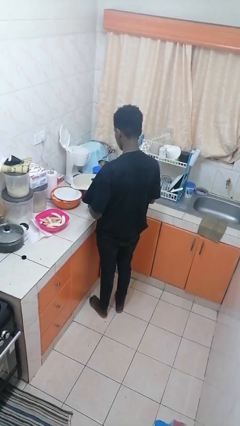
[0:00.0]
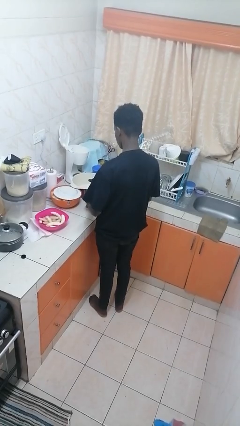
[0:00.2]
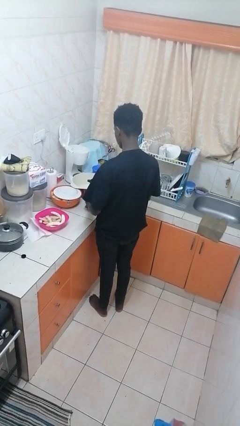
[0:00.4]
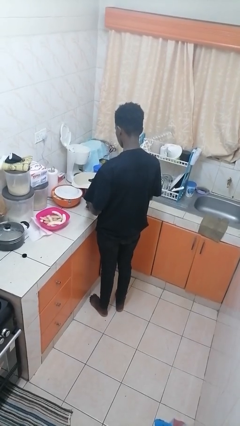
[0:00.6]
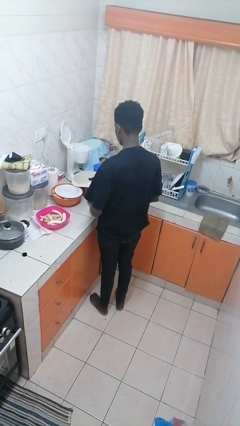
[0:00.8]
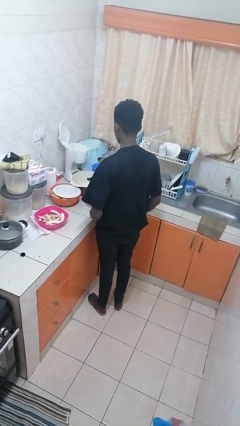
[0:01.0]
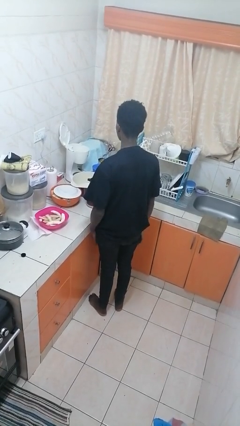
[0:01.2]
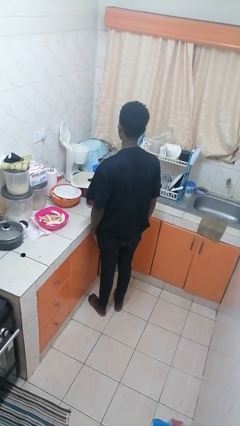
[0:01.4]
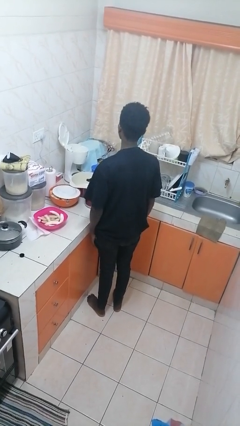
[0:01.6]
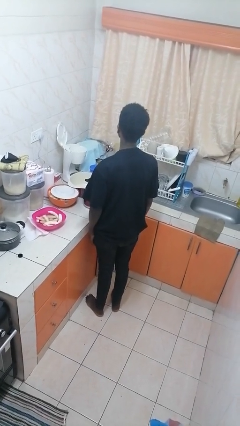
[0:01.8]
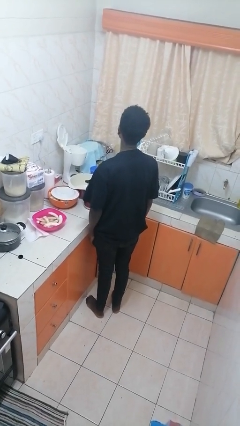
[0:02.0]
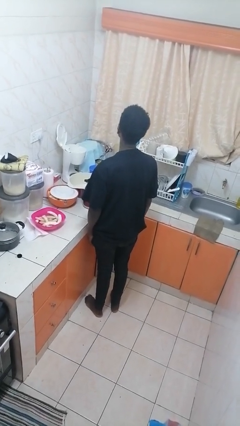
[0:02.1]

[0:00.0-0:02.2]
person puts down object on countertop

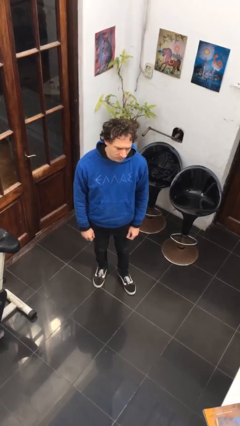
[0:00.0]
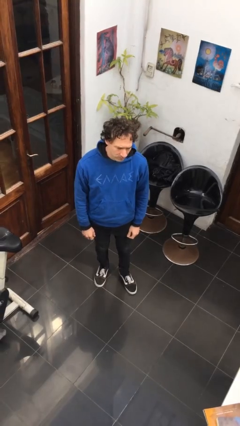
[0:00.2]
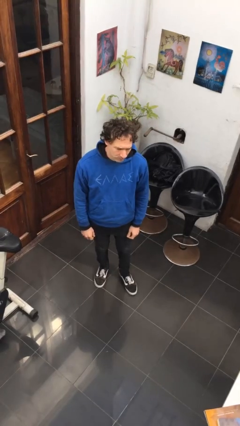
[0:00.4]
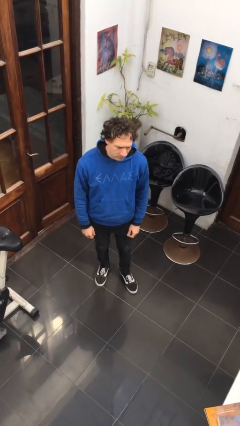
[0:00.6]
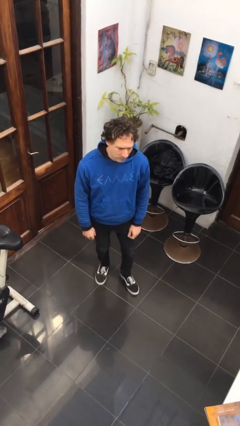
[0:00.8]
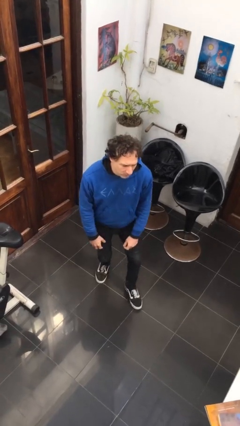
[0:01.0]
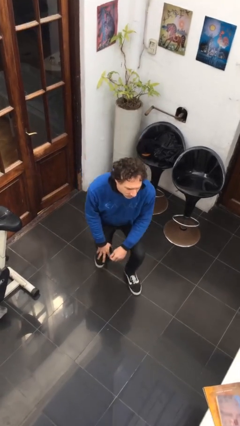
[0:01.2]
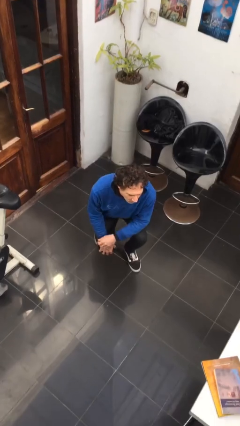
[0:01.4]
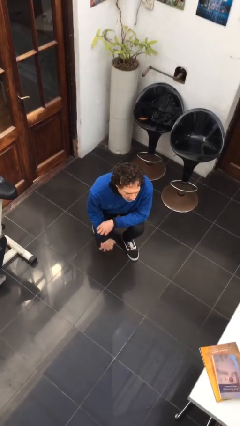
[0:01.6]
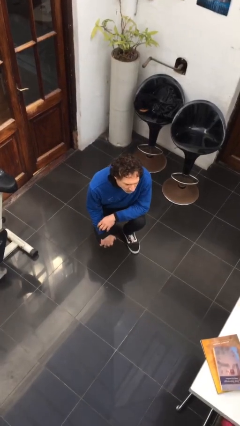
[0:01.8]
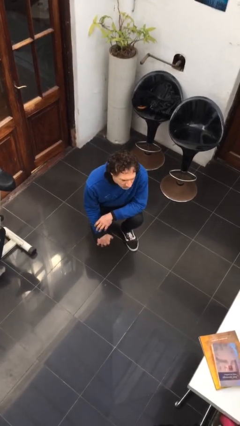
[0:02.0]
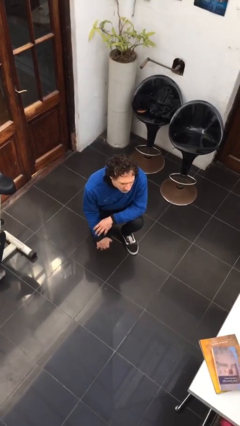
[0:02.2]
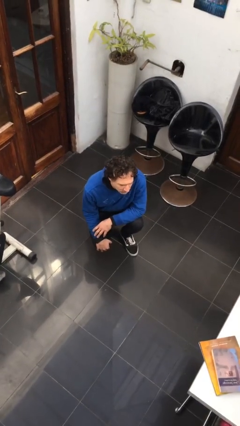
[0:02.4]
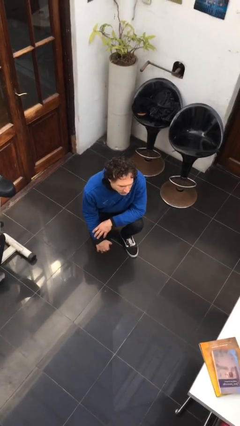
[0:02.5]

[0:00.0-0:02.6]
person squats

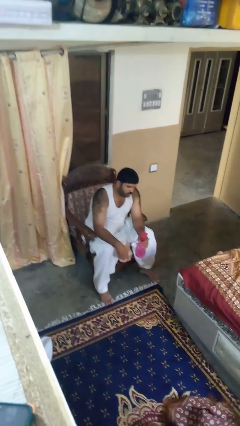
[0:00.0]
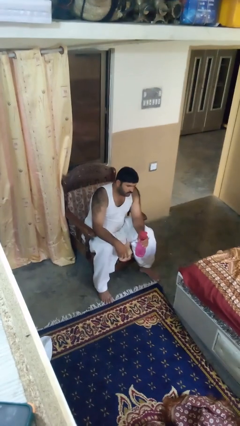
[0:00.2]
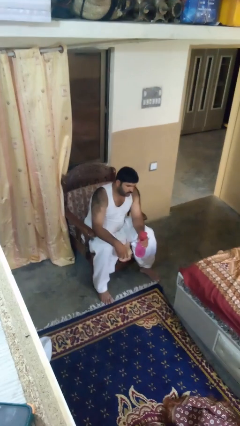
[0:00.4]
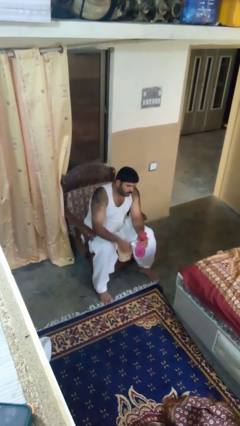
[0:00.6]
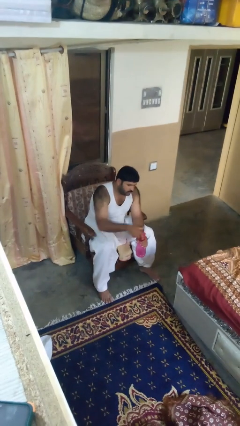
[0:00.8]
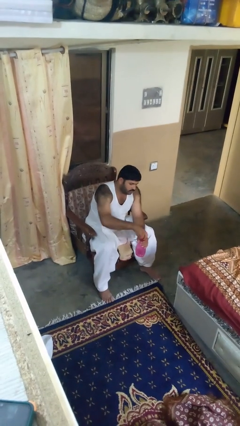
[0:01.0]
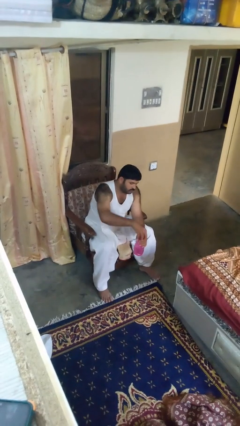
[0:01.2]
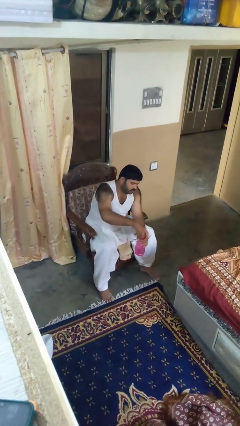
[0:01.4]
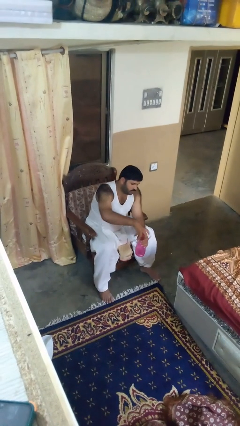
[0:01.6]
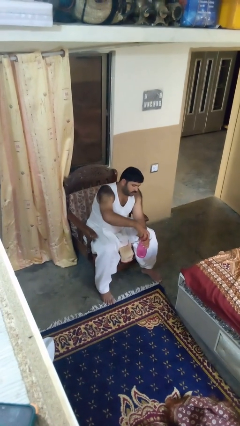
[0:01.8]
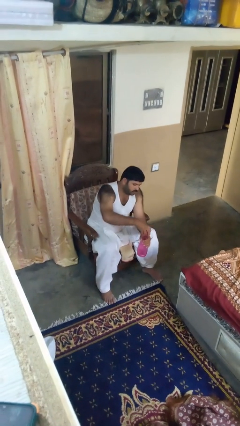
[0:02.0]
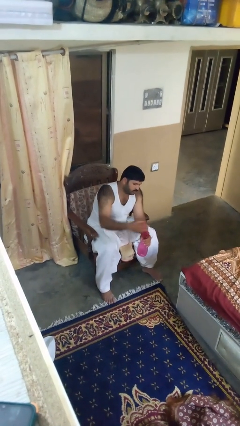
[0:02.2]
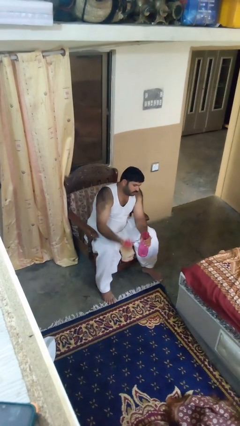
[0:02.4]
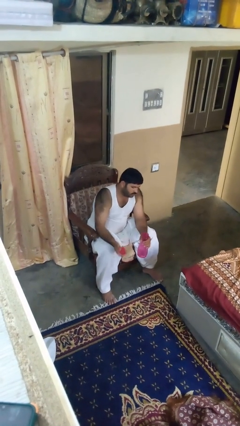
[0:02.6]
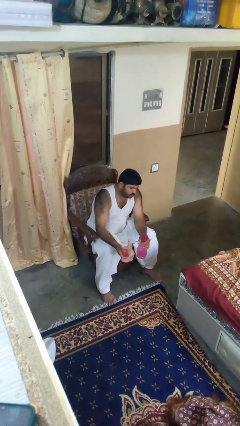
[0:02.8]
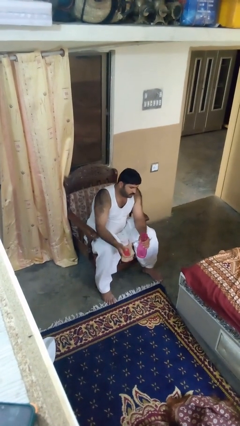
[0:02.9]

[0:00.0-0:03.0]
person unscrews lid from bottle

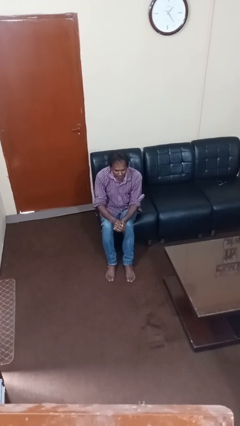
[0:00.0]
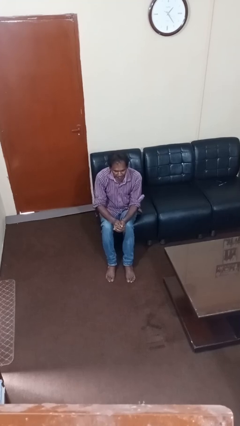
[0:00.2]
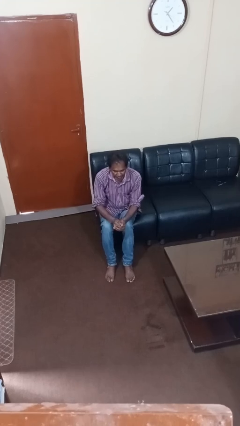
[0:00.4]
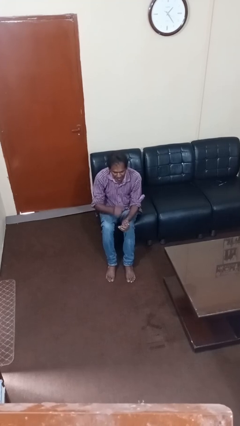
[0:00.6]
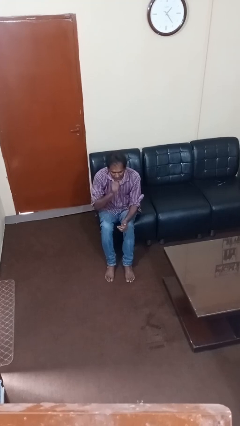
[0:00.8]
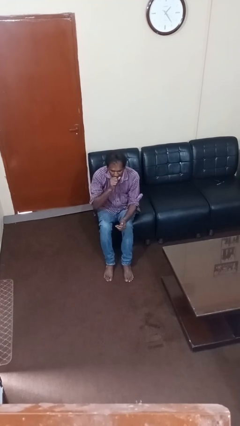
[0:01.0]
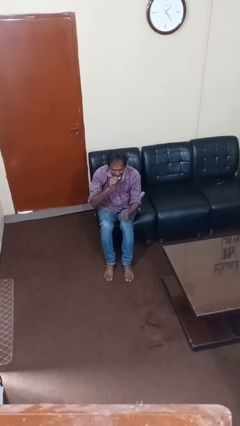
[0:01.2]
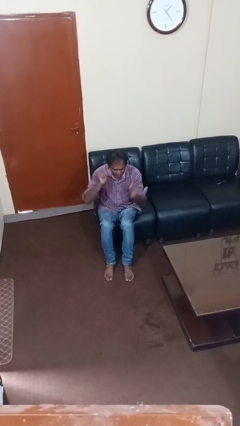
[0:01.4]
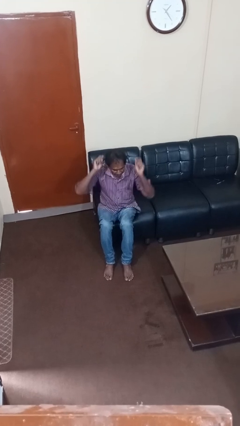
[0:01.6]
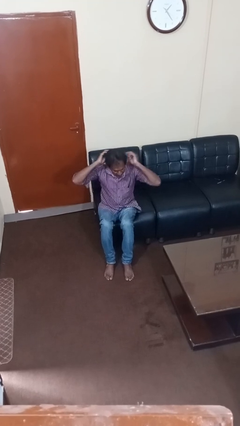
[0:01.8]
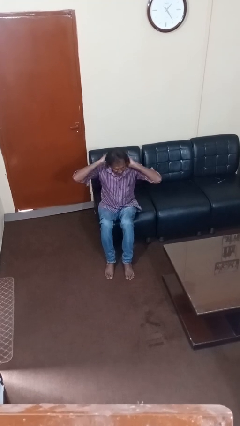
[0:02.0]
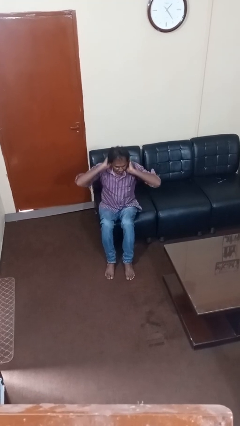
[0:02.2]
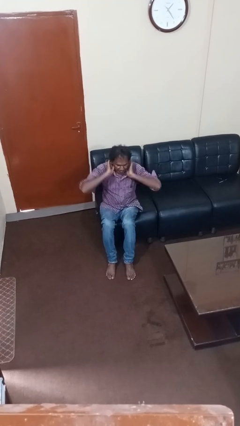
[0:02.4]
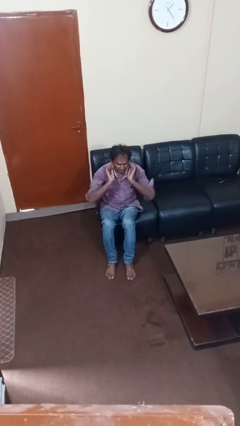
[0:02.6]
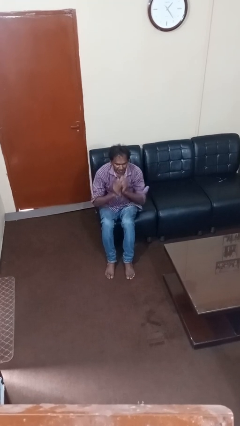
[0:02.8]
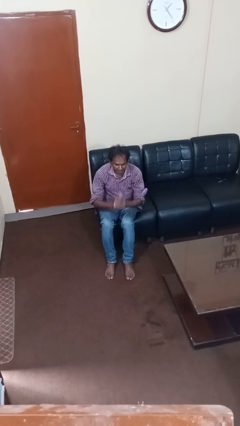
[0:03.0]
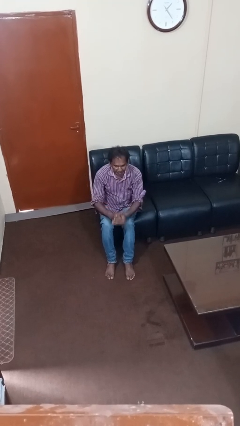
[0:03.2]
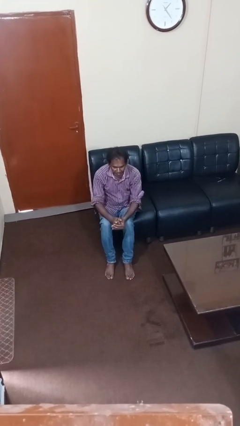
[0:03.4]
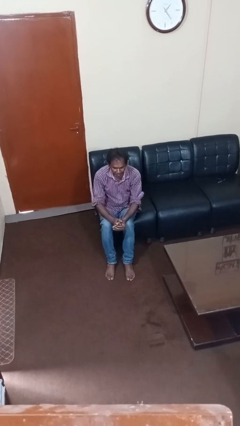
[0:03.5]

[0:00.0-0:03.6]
person yawns

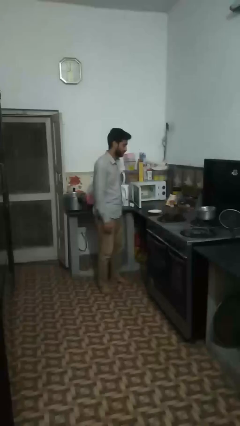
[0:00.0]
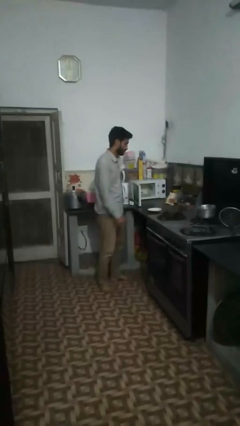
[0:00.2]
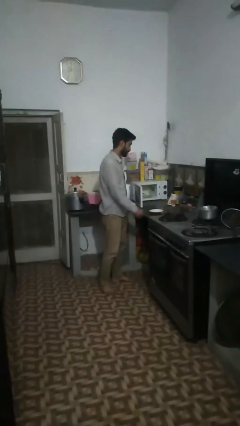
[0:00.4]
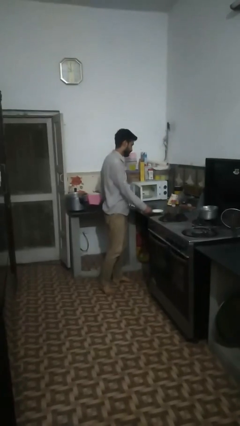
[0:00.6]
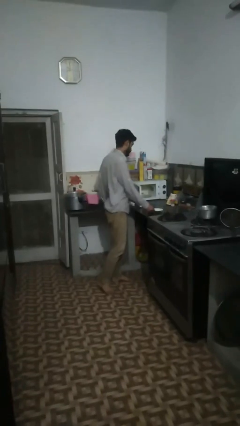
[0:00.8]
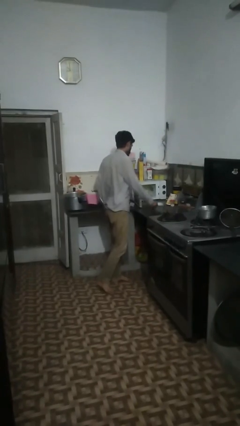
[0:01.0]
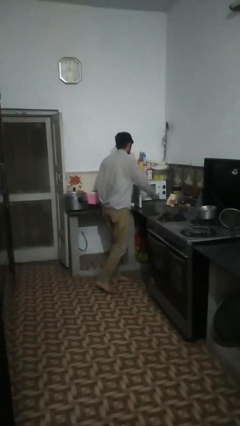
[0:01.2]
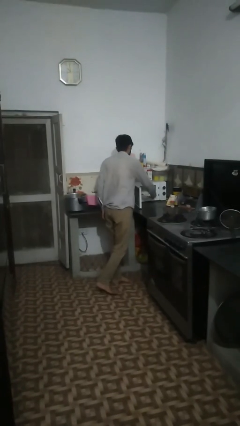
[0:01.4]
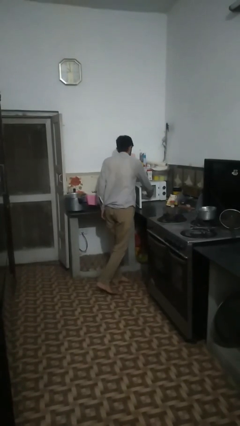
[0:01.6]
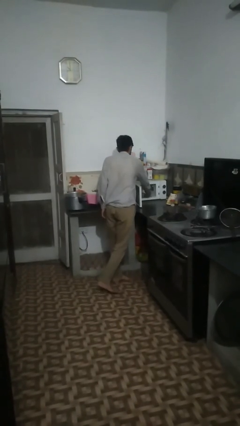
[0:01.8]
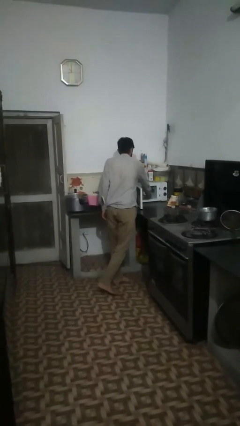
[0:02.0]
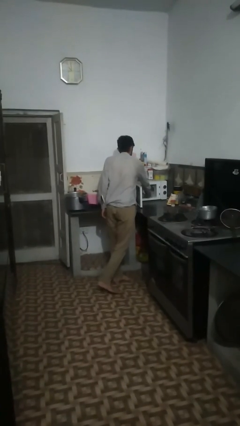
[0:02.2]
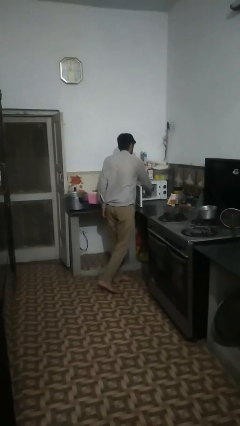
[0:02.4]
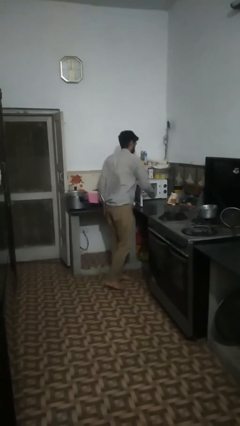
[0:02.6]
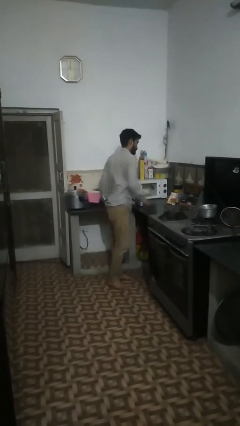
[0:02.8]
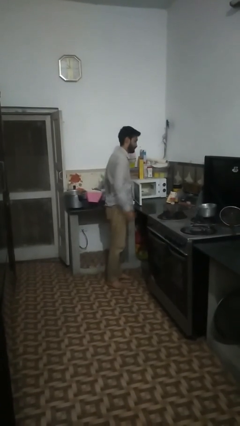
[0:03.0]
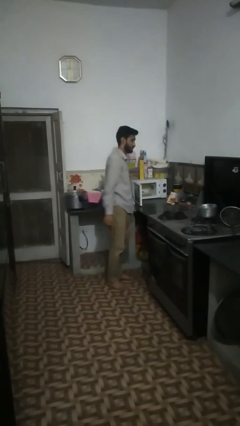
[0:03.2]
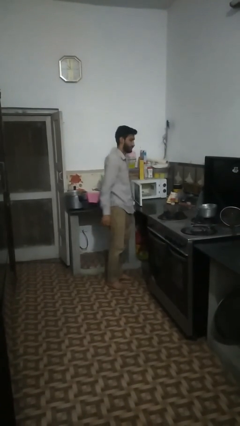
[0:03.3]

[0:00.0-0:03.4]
person puts object into microwave

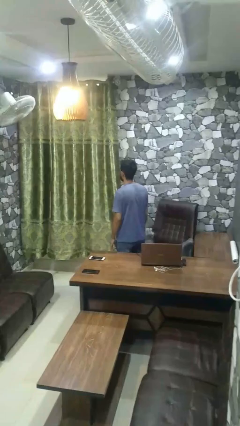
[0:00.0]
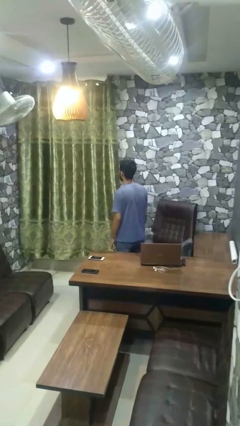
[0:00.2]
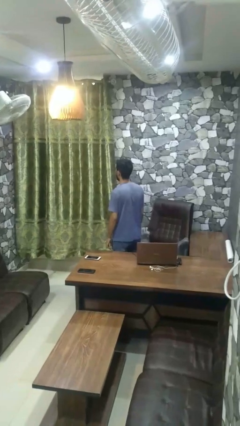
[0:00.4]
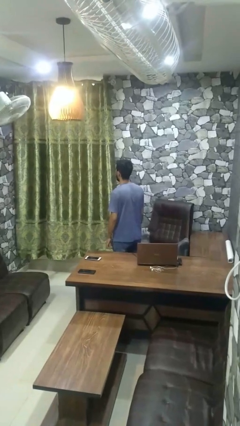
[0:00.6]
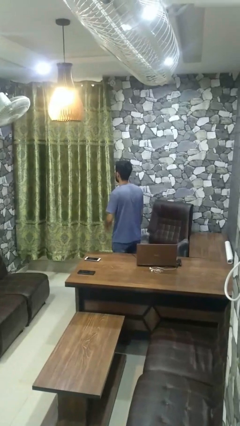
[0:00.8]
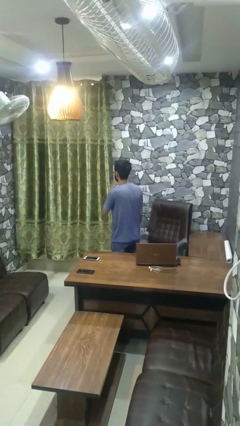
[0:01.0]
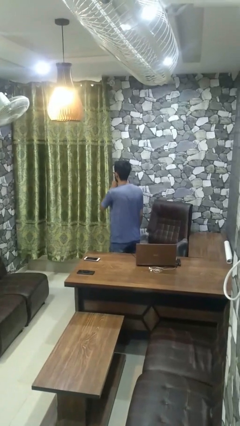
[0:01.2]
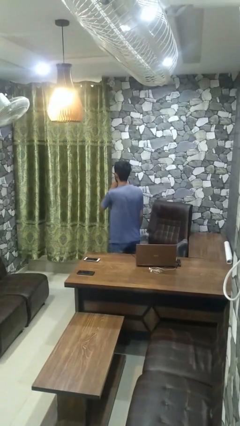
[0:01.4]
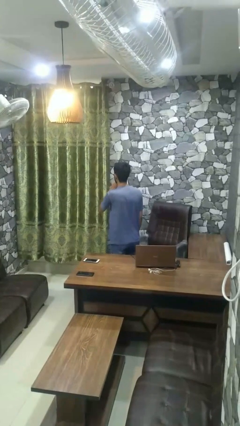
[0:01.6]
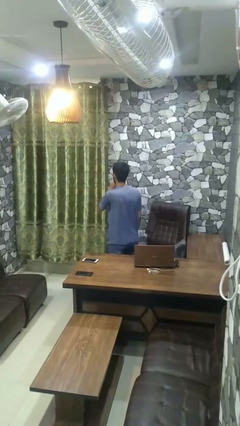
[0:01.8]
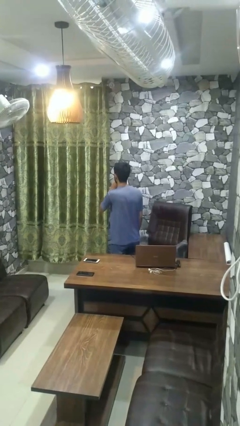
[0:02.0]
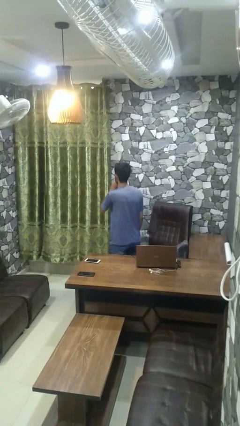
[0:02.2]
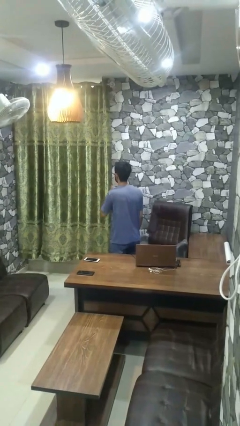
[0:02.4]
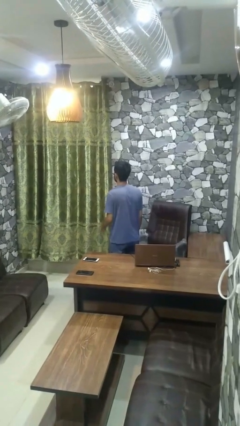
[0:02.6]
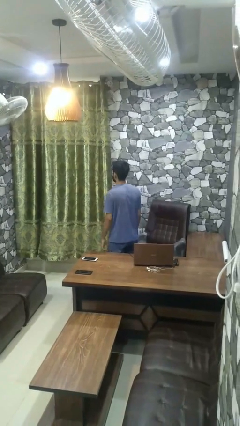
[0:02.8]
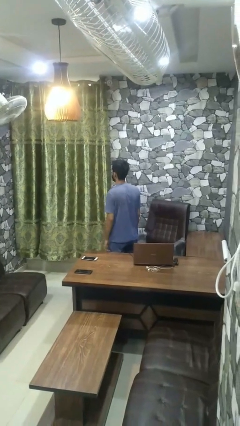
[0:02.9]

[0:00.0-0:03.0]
person gestures be quiet
